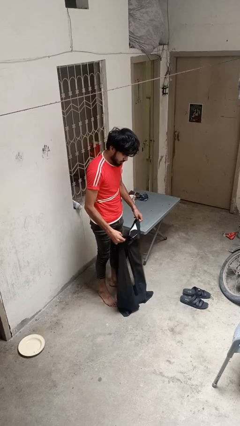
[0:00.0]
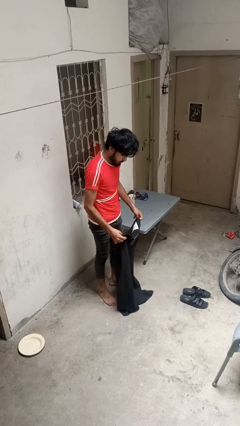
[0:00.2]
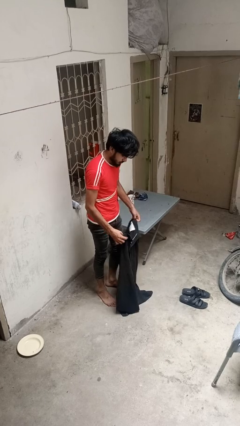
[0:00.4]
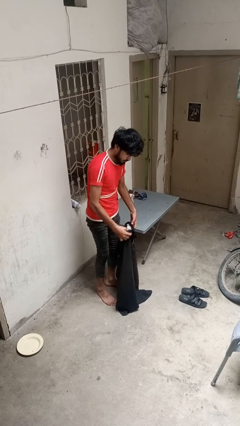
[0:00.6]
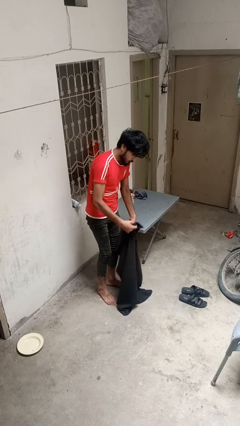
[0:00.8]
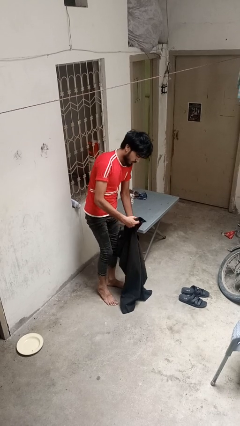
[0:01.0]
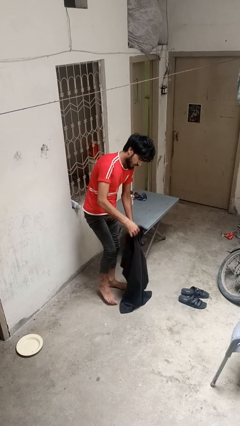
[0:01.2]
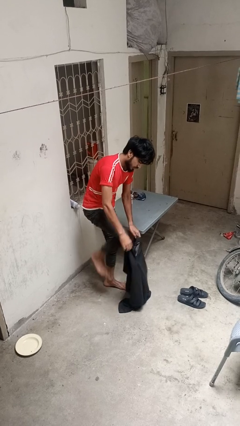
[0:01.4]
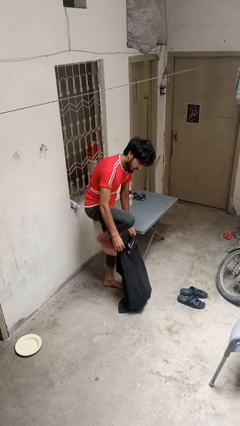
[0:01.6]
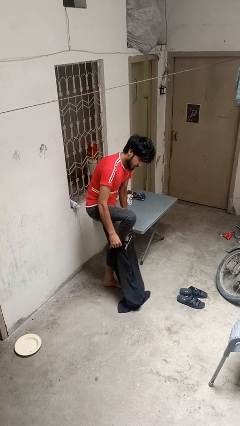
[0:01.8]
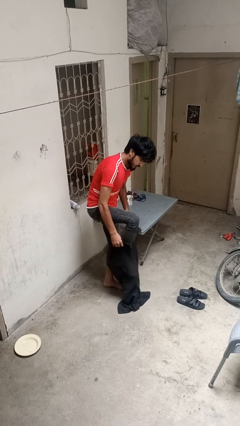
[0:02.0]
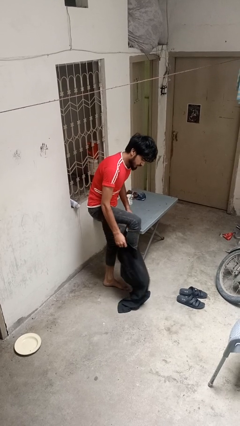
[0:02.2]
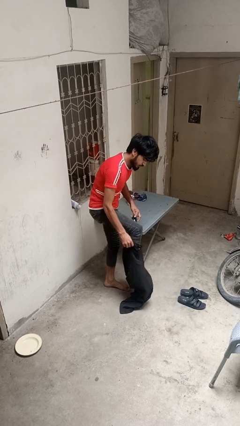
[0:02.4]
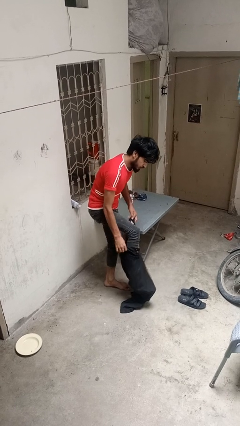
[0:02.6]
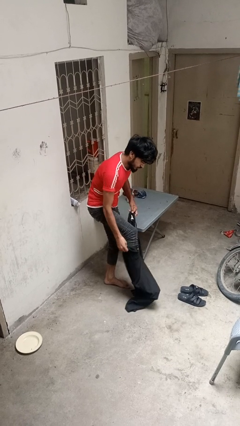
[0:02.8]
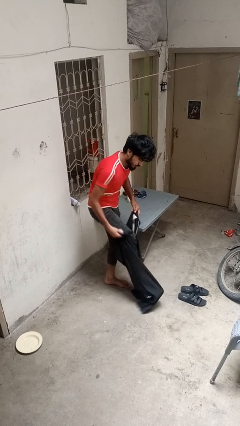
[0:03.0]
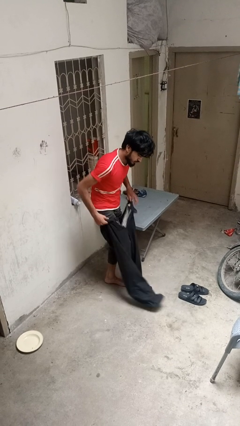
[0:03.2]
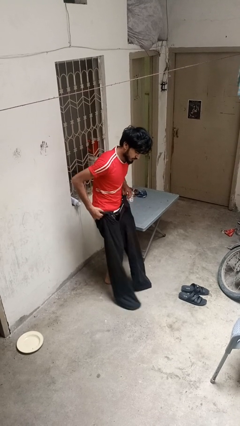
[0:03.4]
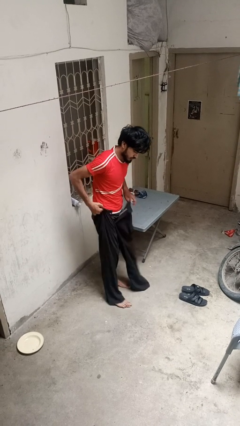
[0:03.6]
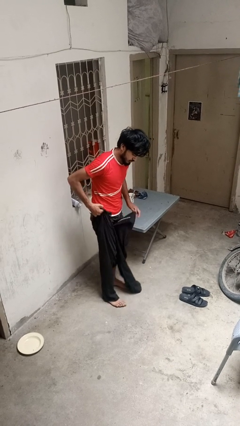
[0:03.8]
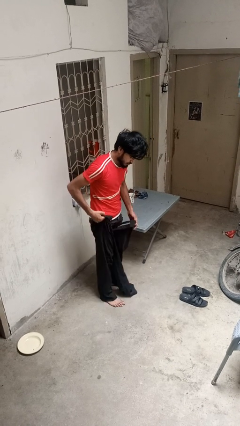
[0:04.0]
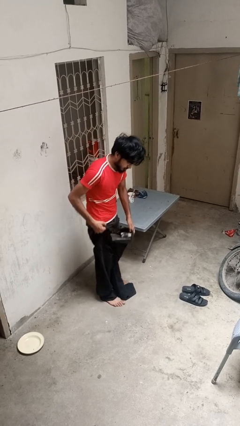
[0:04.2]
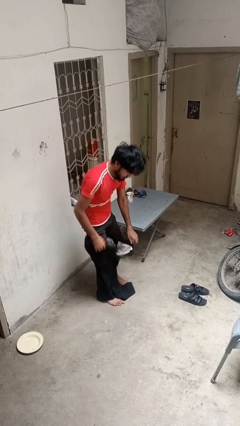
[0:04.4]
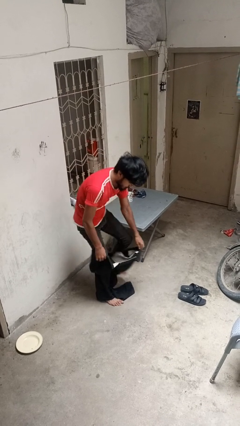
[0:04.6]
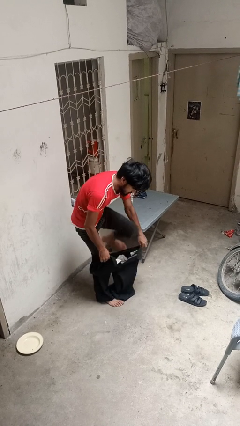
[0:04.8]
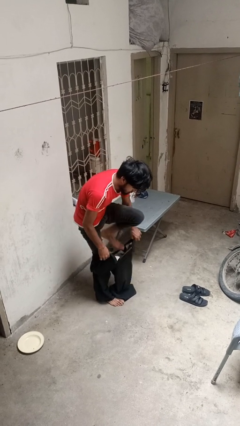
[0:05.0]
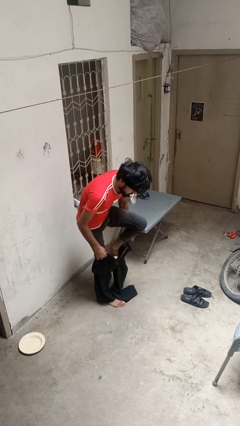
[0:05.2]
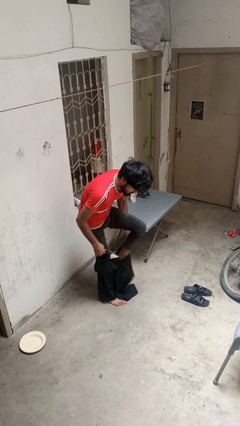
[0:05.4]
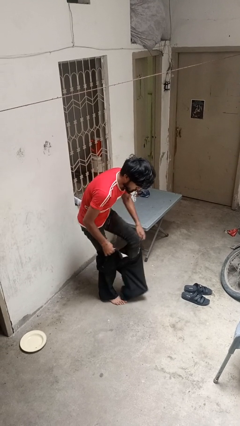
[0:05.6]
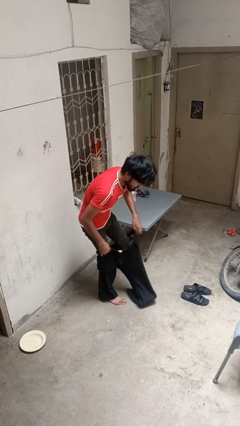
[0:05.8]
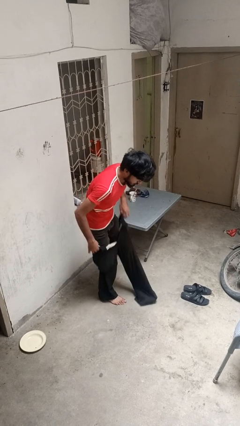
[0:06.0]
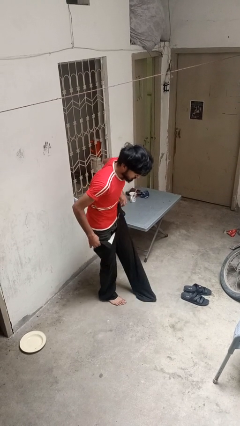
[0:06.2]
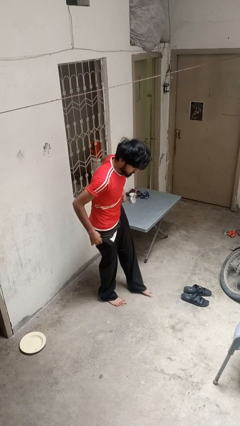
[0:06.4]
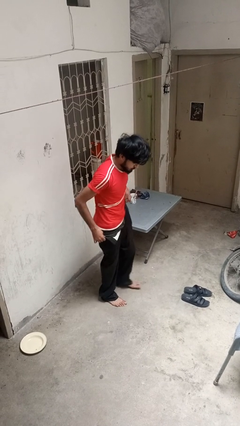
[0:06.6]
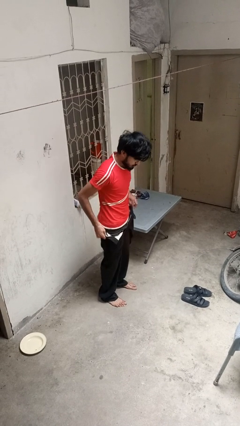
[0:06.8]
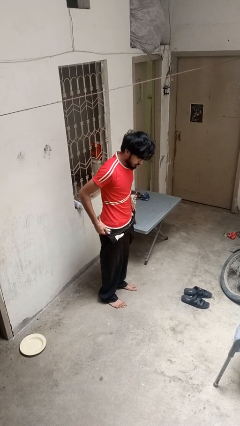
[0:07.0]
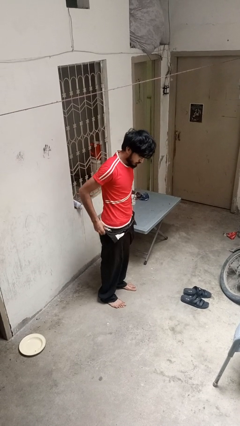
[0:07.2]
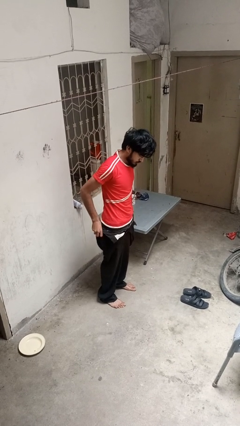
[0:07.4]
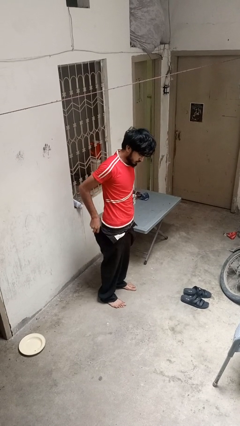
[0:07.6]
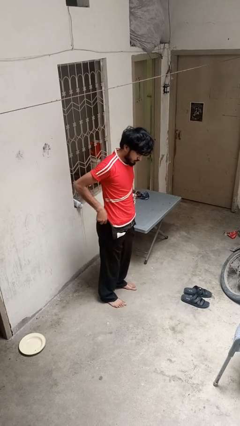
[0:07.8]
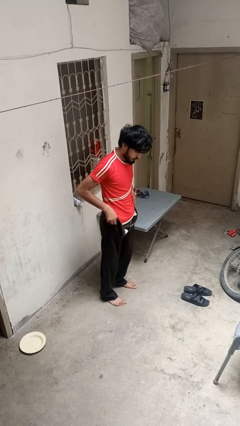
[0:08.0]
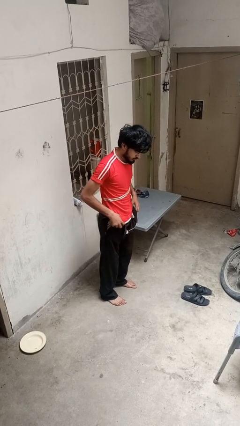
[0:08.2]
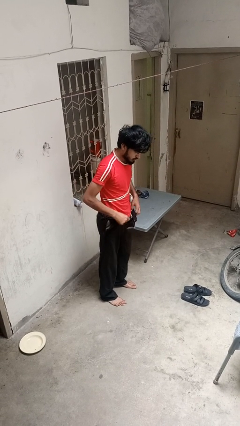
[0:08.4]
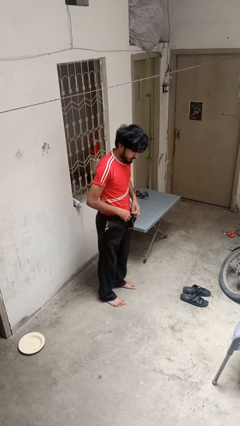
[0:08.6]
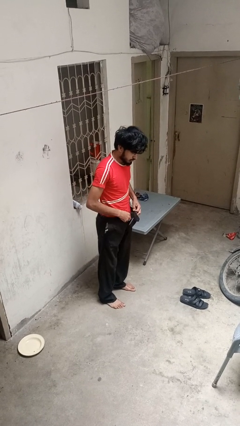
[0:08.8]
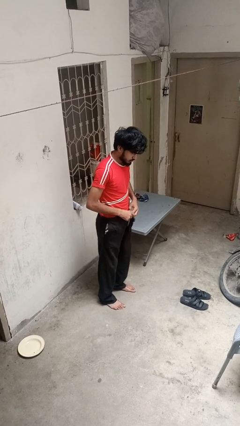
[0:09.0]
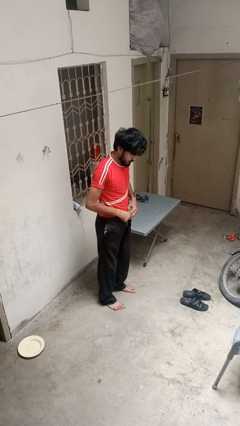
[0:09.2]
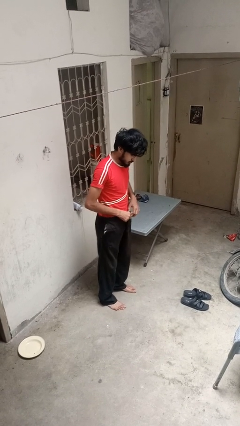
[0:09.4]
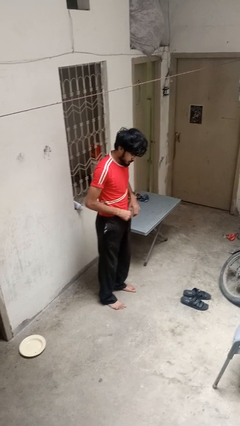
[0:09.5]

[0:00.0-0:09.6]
person puts on pants

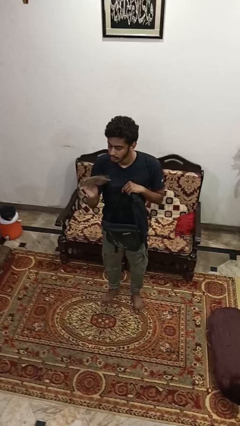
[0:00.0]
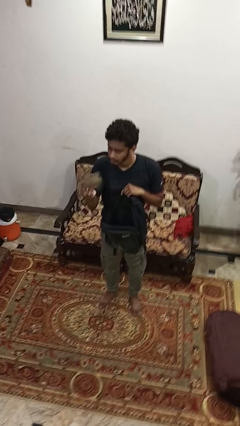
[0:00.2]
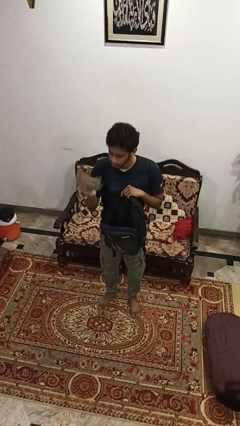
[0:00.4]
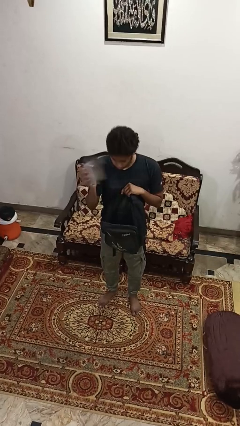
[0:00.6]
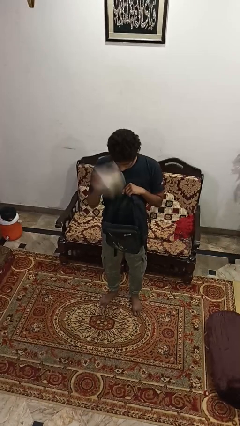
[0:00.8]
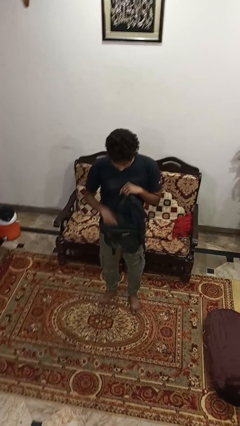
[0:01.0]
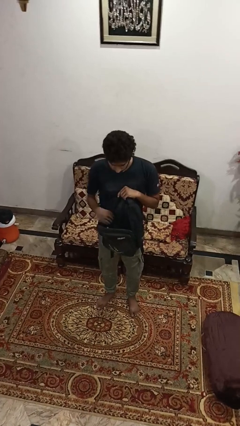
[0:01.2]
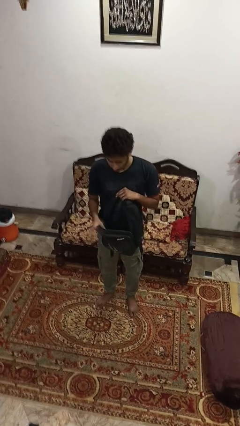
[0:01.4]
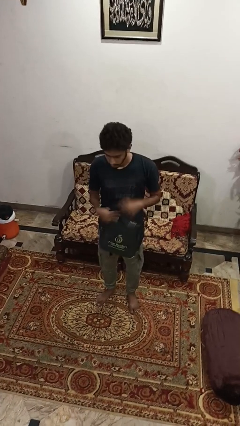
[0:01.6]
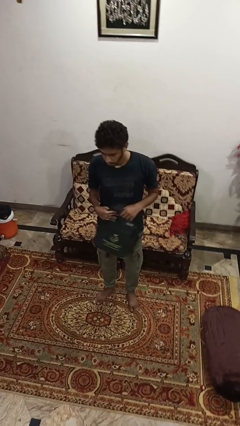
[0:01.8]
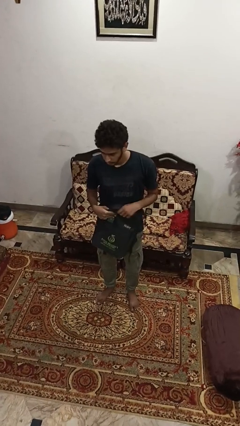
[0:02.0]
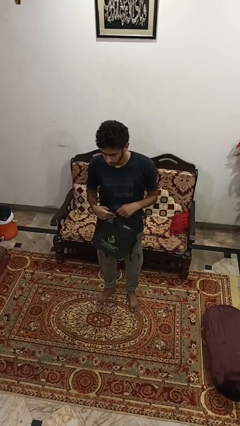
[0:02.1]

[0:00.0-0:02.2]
person puts object into backpack

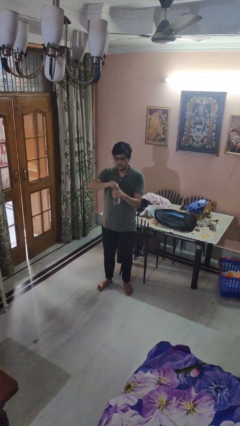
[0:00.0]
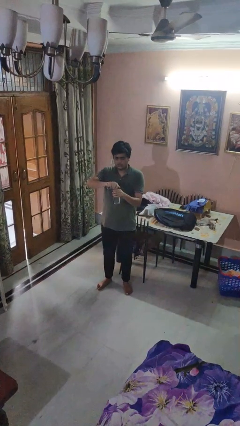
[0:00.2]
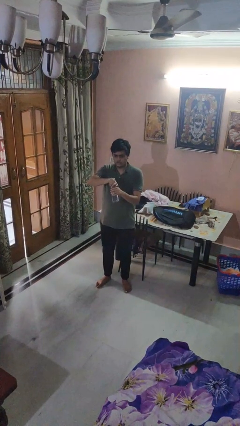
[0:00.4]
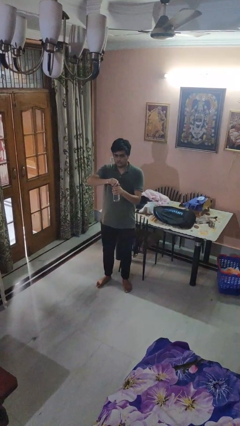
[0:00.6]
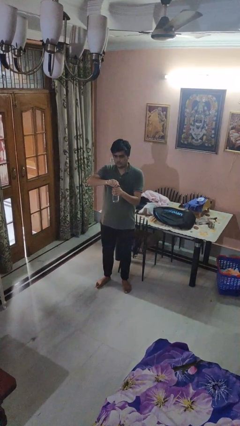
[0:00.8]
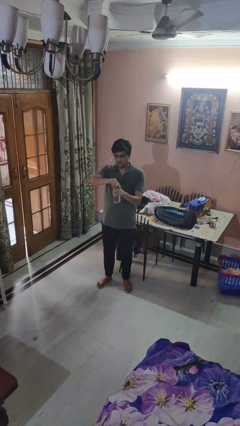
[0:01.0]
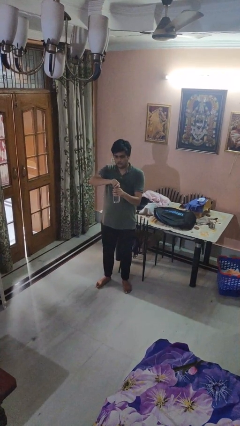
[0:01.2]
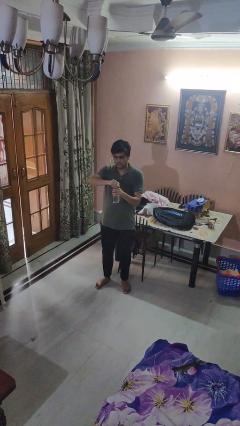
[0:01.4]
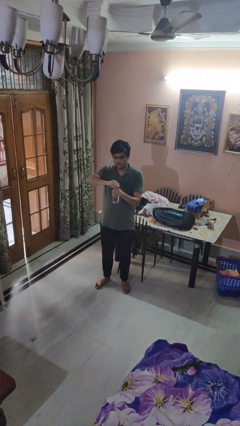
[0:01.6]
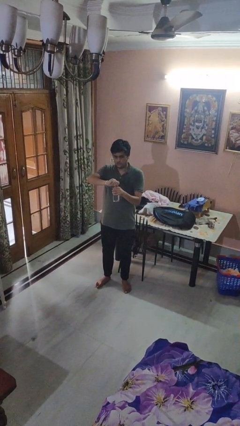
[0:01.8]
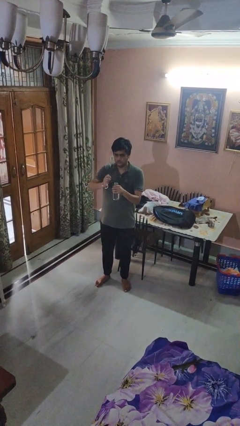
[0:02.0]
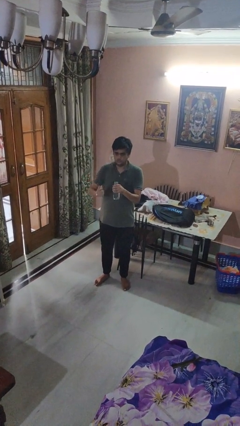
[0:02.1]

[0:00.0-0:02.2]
person unscrews lid from bottle

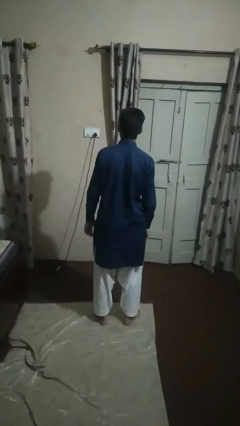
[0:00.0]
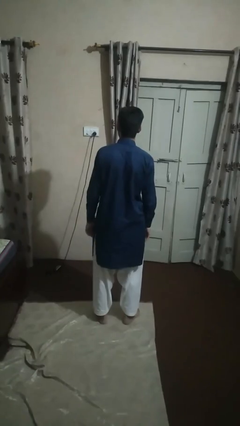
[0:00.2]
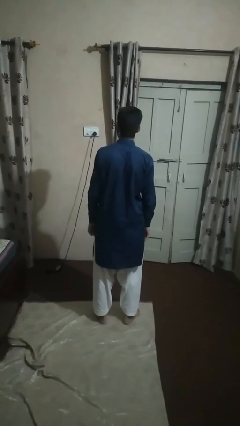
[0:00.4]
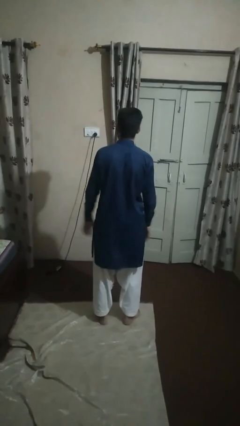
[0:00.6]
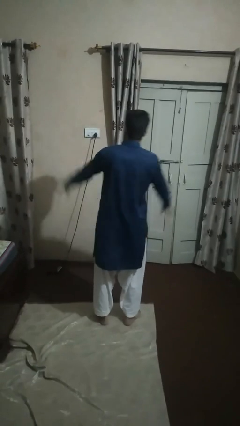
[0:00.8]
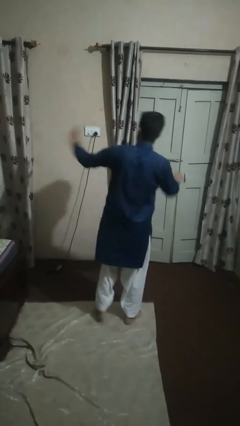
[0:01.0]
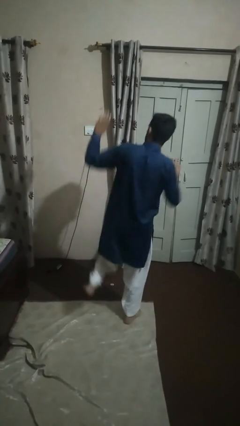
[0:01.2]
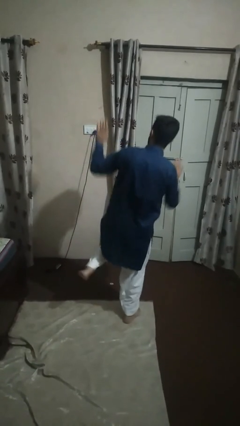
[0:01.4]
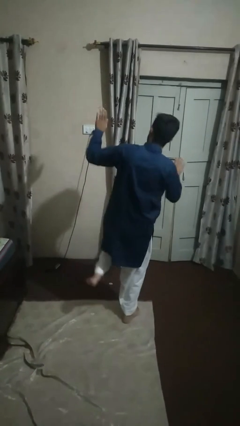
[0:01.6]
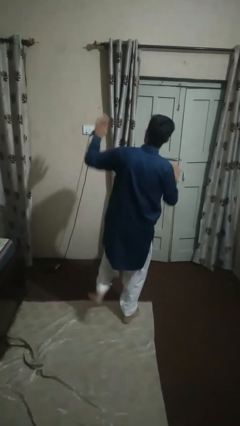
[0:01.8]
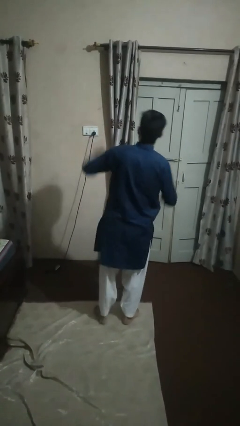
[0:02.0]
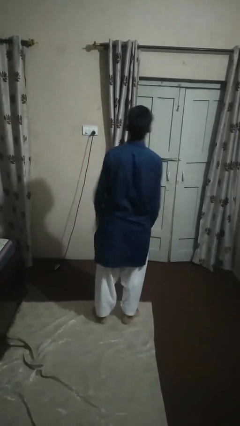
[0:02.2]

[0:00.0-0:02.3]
person dances in place

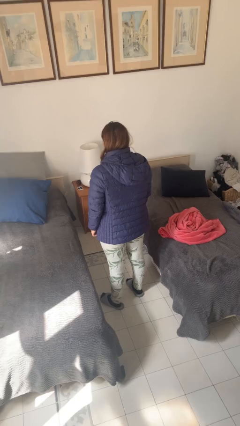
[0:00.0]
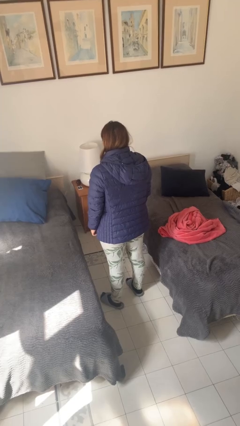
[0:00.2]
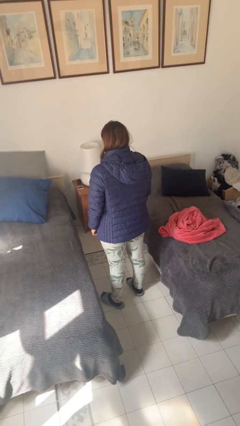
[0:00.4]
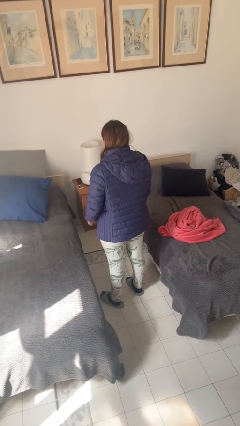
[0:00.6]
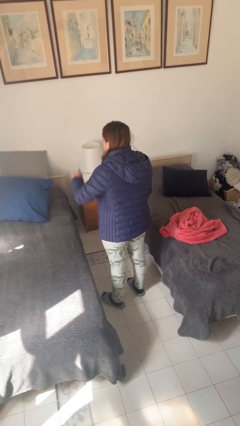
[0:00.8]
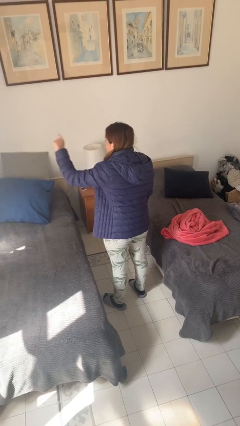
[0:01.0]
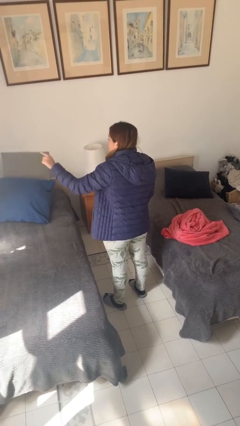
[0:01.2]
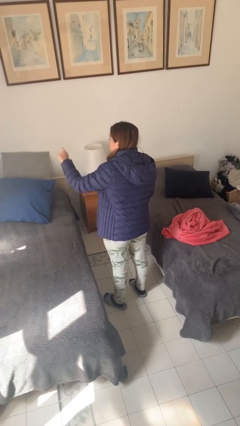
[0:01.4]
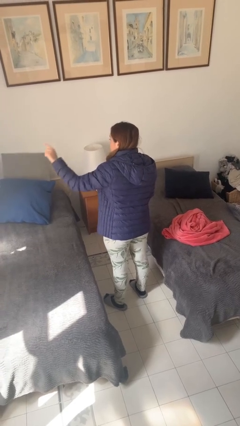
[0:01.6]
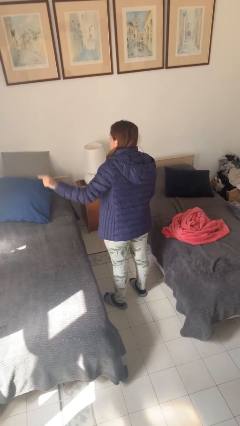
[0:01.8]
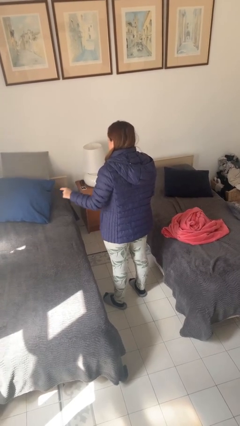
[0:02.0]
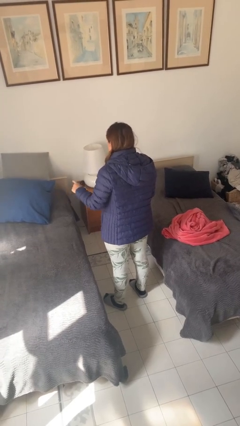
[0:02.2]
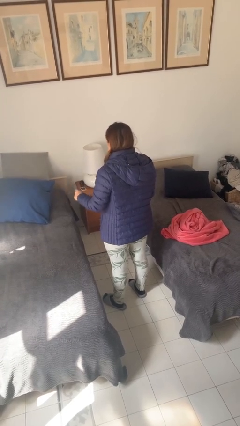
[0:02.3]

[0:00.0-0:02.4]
person gestures number three
